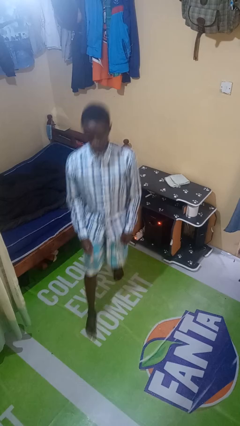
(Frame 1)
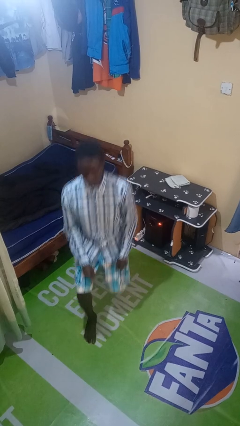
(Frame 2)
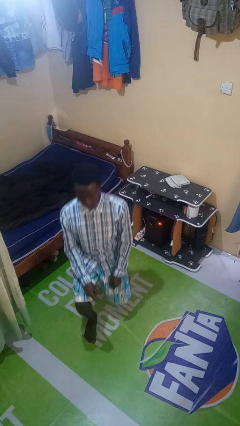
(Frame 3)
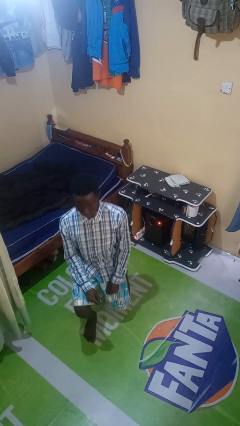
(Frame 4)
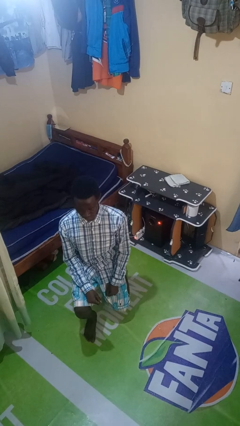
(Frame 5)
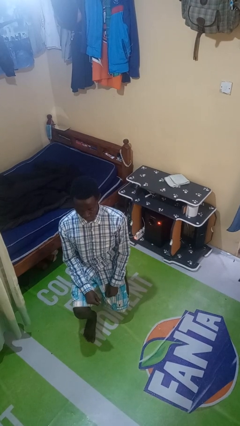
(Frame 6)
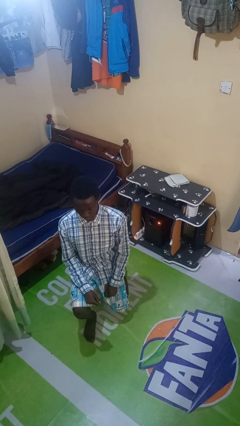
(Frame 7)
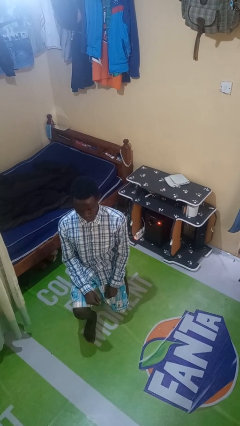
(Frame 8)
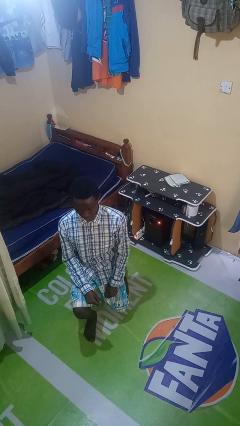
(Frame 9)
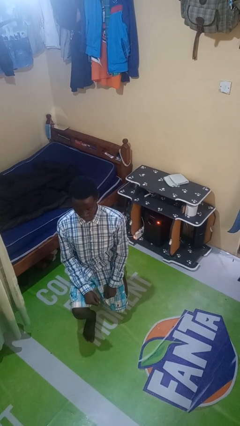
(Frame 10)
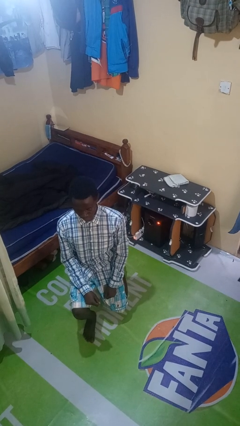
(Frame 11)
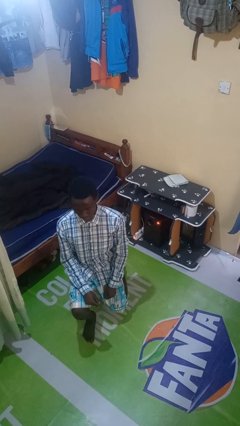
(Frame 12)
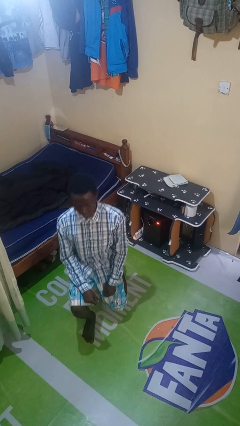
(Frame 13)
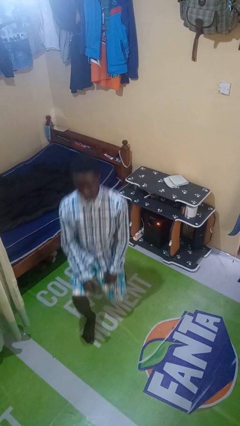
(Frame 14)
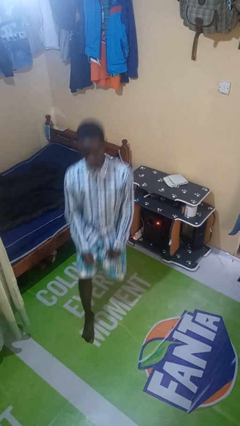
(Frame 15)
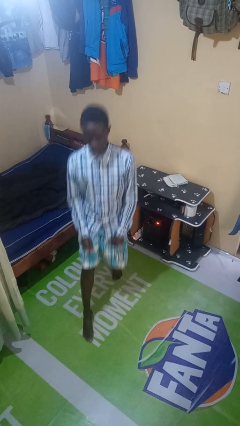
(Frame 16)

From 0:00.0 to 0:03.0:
person exercises with lunges

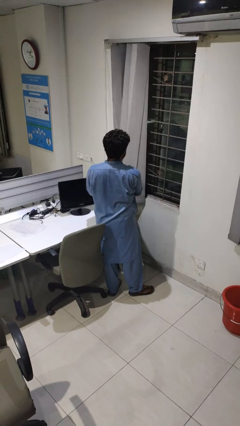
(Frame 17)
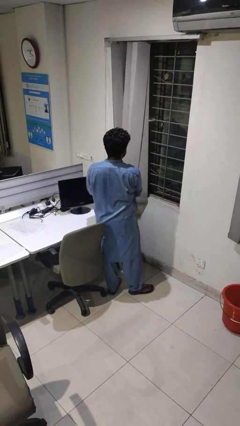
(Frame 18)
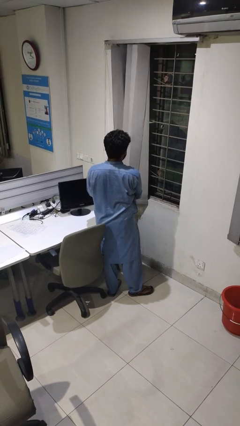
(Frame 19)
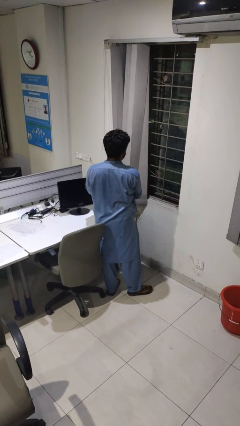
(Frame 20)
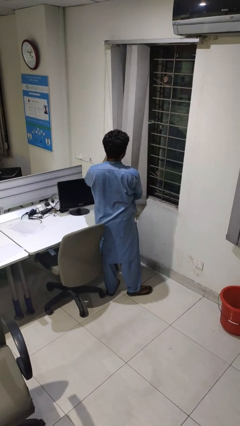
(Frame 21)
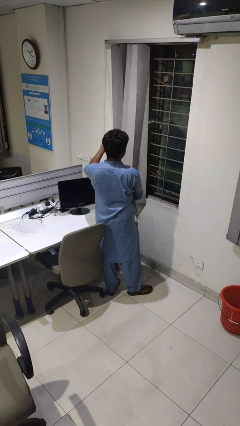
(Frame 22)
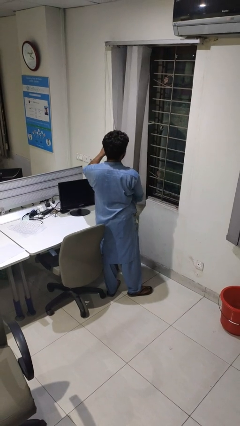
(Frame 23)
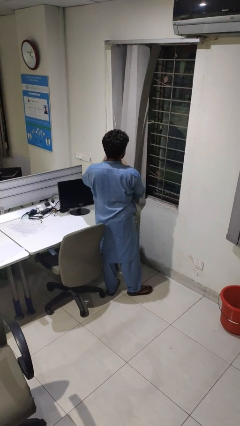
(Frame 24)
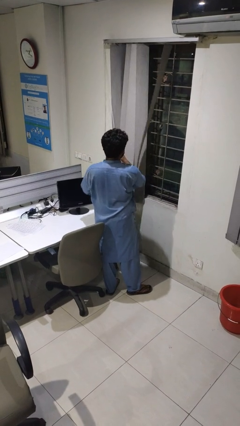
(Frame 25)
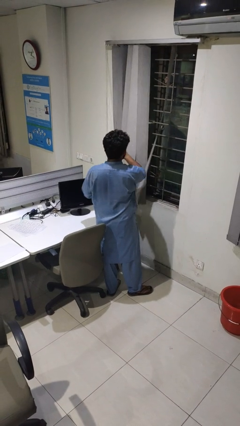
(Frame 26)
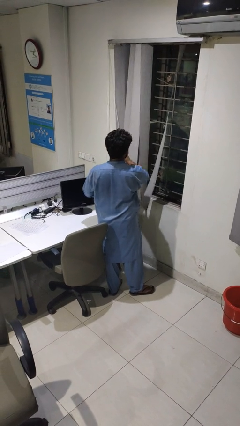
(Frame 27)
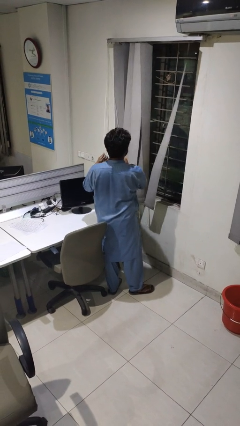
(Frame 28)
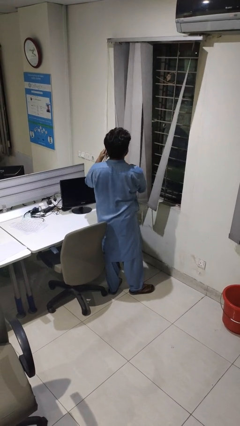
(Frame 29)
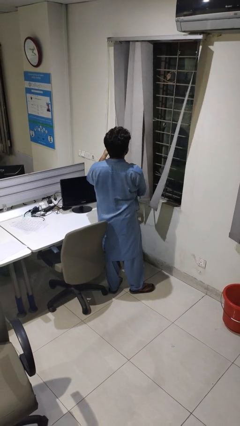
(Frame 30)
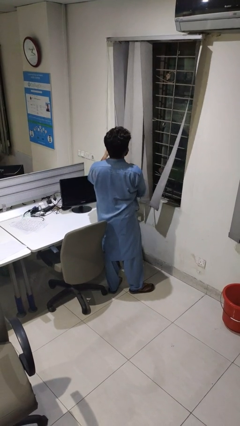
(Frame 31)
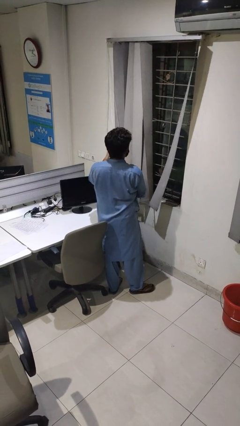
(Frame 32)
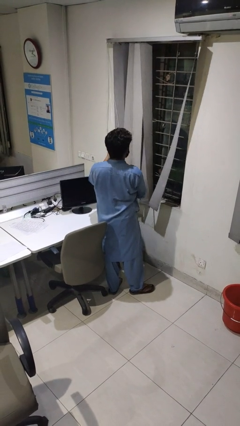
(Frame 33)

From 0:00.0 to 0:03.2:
person closes curtains

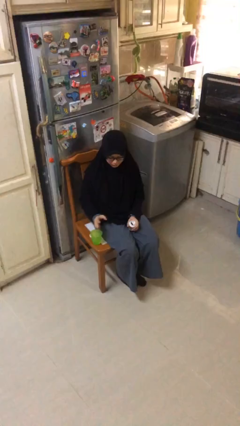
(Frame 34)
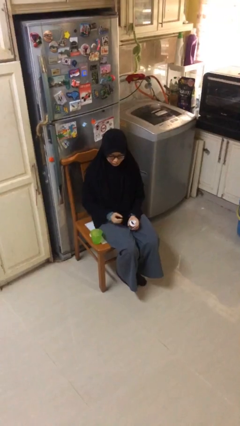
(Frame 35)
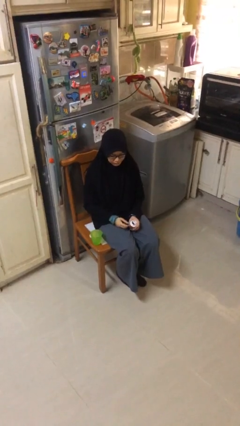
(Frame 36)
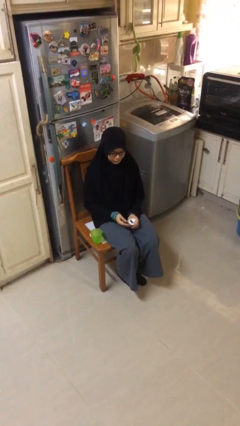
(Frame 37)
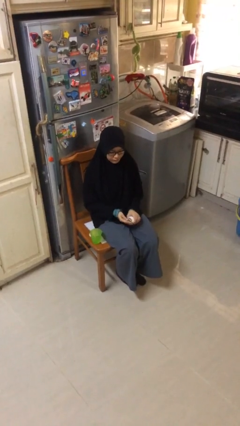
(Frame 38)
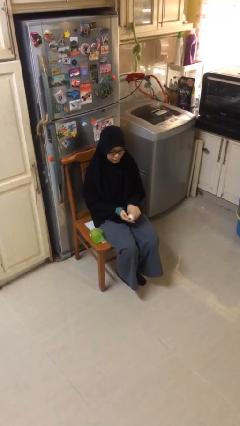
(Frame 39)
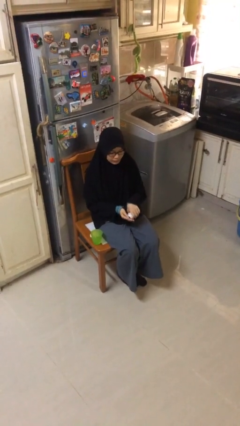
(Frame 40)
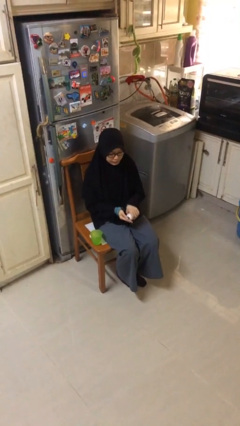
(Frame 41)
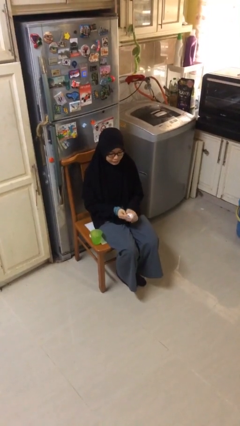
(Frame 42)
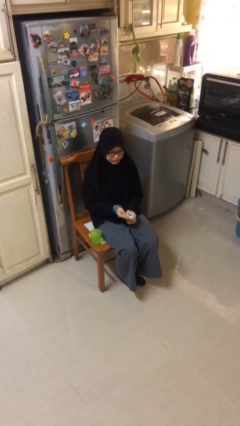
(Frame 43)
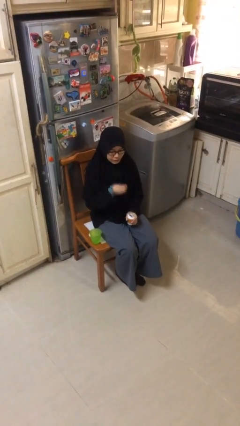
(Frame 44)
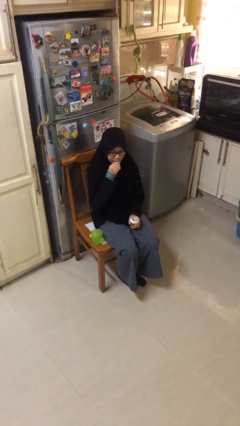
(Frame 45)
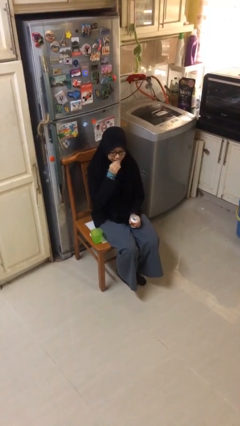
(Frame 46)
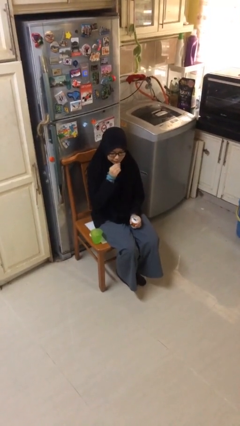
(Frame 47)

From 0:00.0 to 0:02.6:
person takes medicine pills

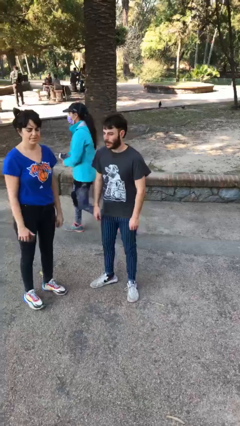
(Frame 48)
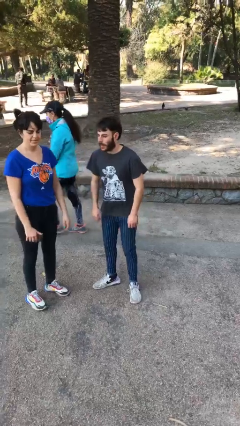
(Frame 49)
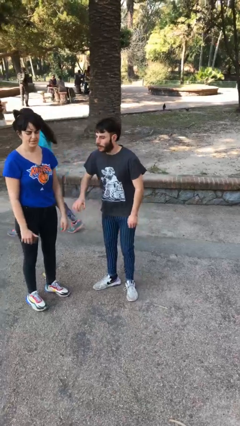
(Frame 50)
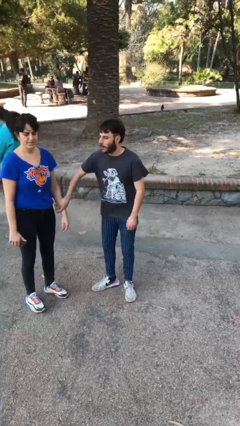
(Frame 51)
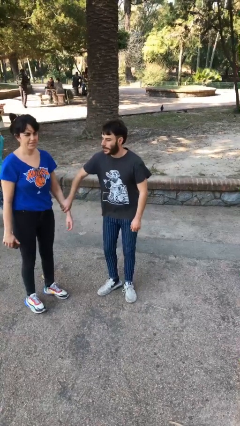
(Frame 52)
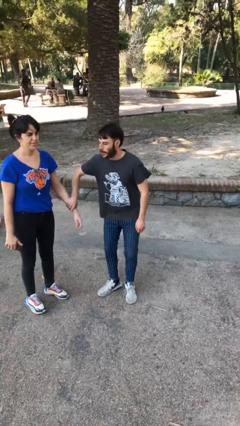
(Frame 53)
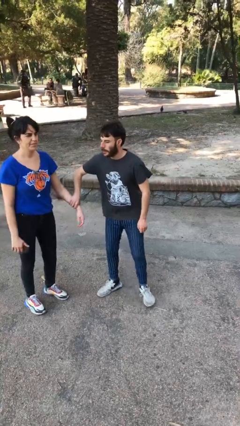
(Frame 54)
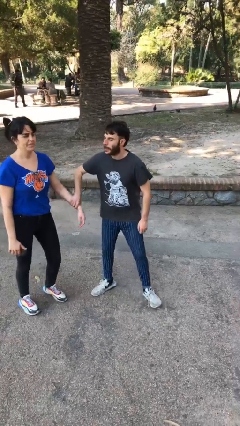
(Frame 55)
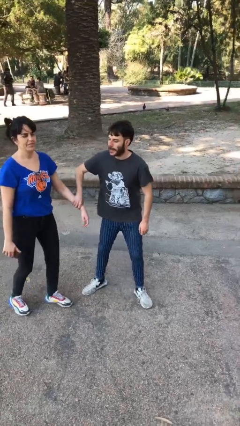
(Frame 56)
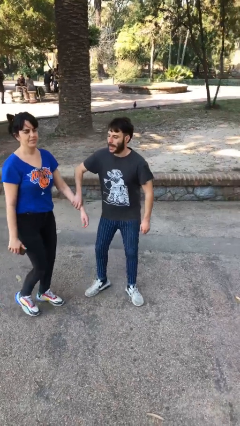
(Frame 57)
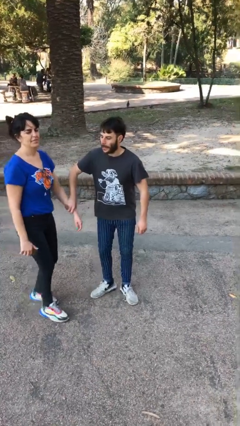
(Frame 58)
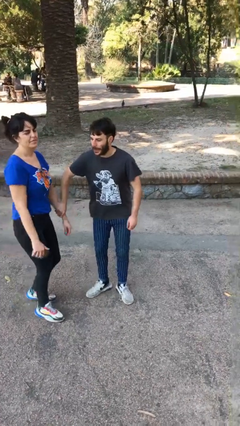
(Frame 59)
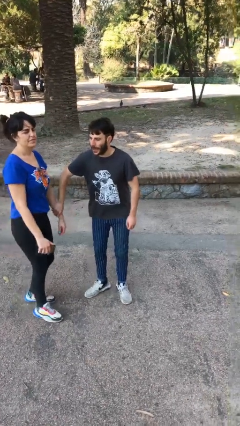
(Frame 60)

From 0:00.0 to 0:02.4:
person grabs person by forearm

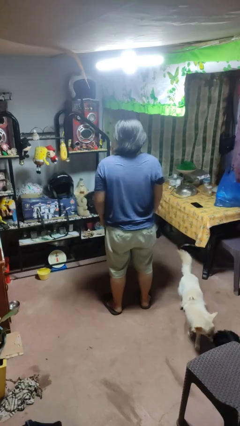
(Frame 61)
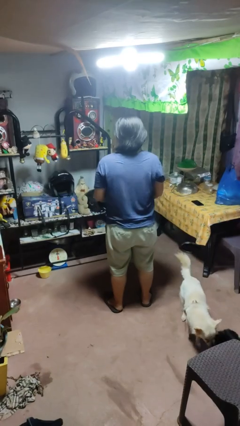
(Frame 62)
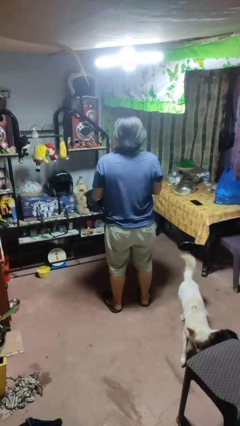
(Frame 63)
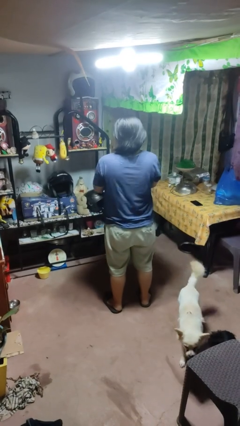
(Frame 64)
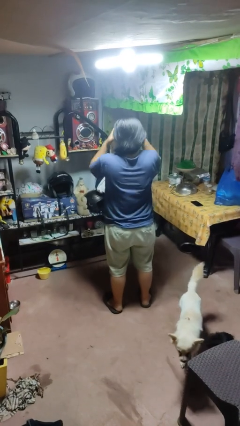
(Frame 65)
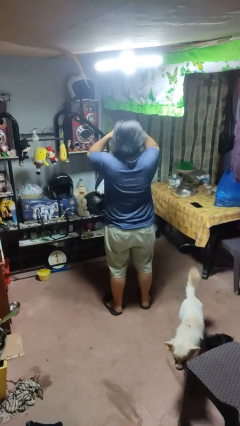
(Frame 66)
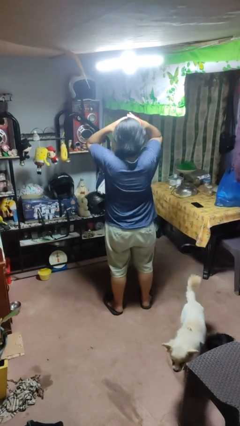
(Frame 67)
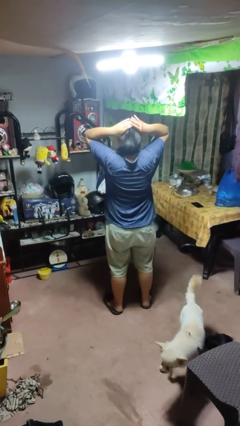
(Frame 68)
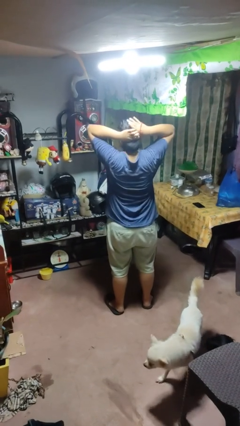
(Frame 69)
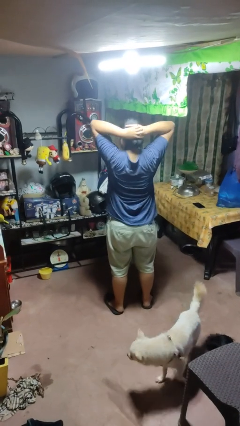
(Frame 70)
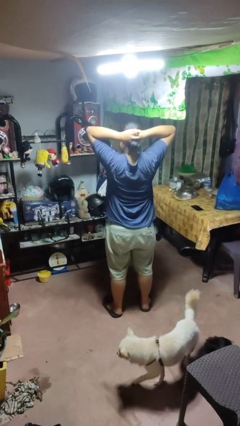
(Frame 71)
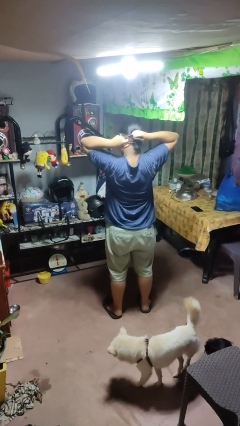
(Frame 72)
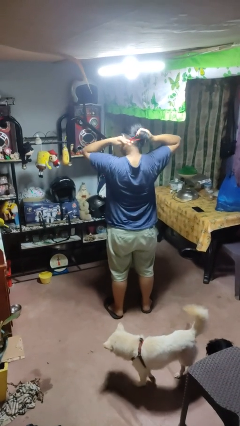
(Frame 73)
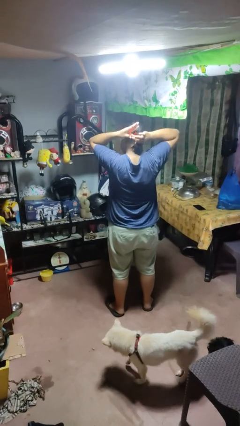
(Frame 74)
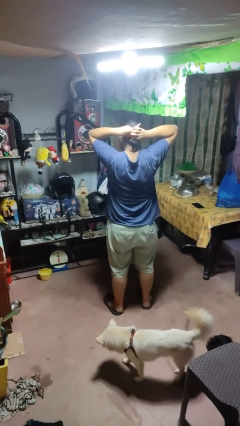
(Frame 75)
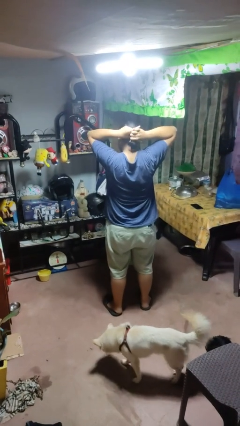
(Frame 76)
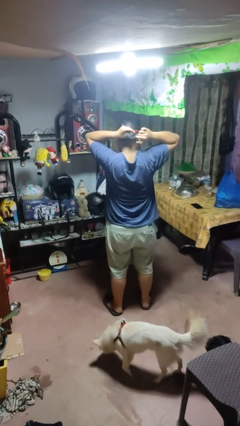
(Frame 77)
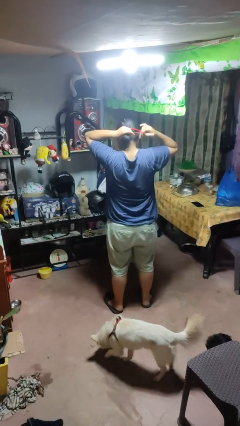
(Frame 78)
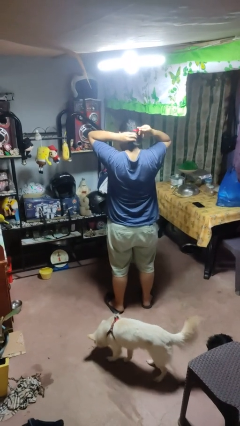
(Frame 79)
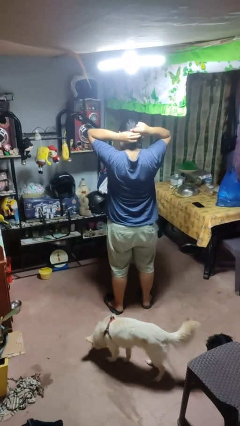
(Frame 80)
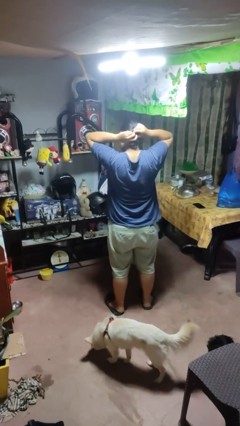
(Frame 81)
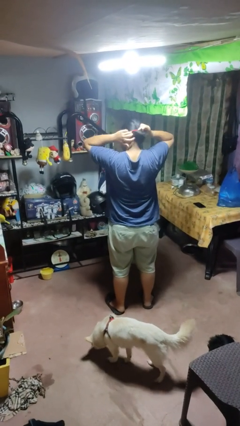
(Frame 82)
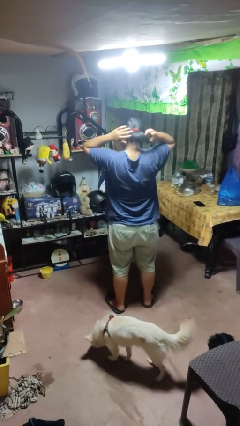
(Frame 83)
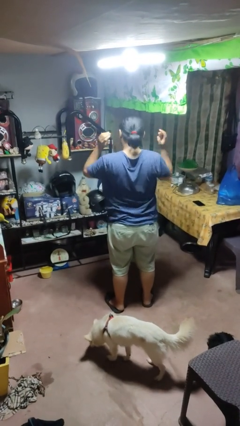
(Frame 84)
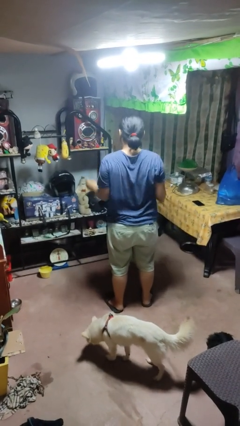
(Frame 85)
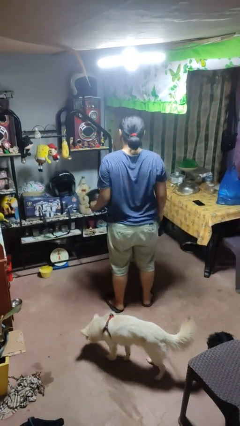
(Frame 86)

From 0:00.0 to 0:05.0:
person puts hair in ponytail

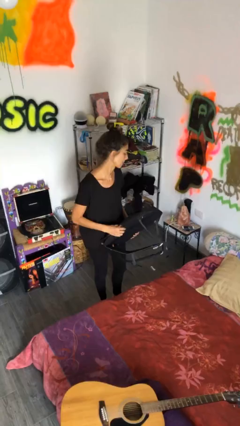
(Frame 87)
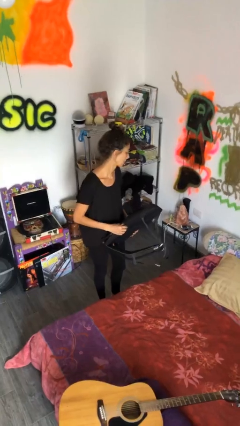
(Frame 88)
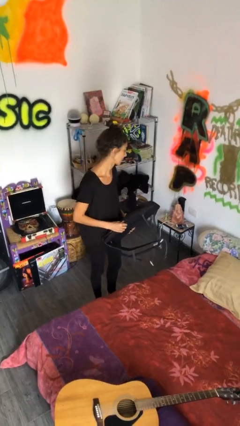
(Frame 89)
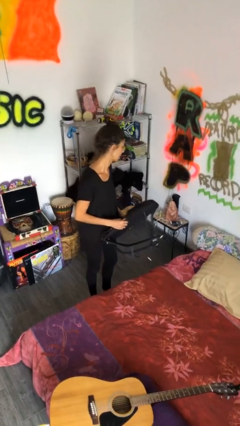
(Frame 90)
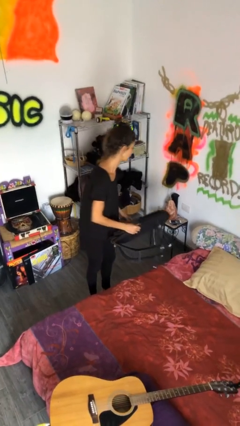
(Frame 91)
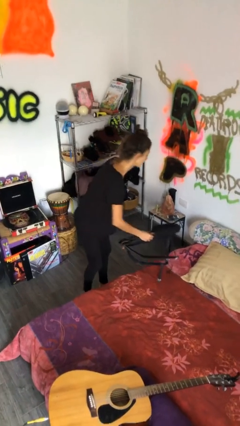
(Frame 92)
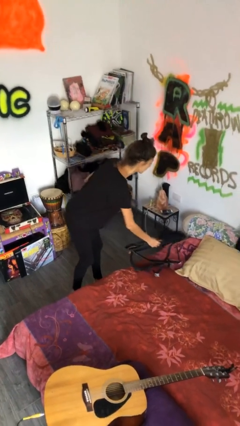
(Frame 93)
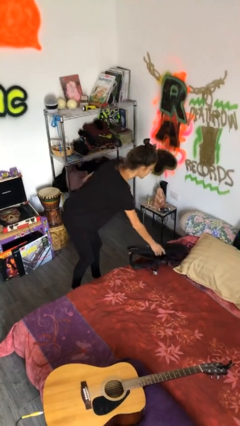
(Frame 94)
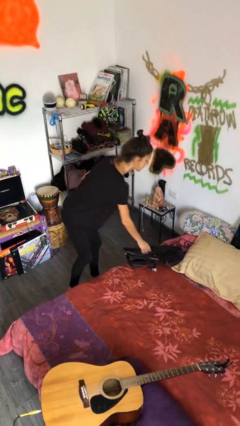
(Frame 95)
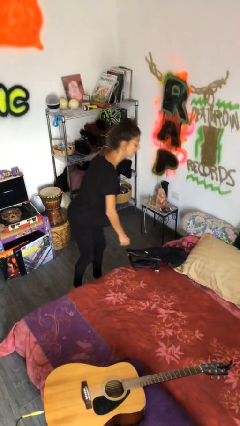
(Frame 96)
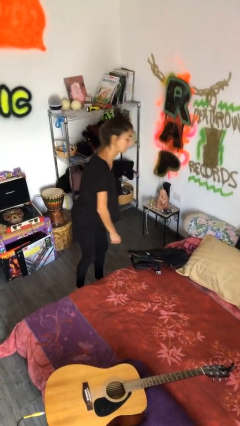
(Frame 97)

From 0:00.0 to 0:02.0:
person puts down object on bed
